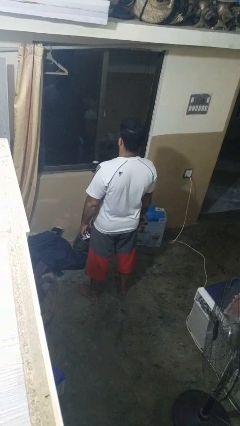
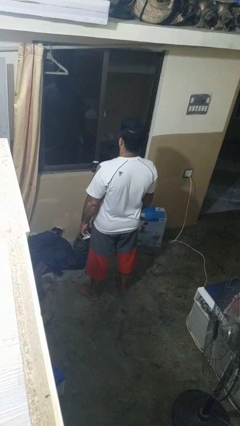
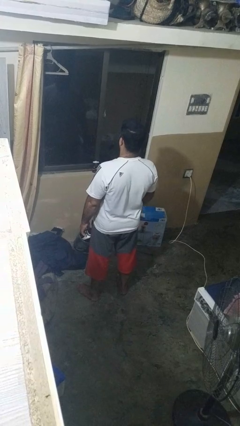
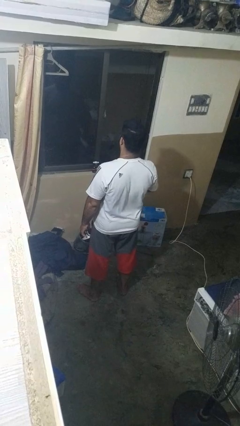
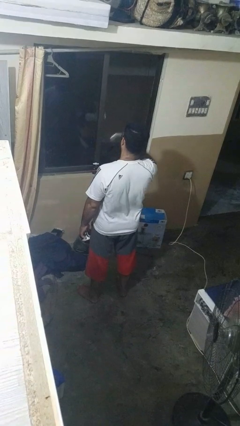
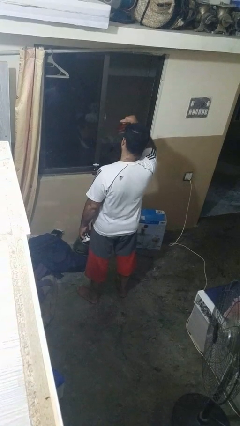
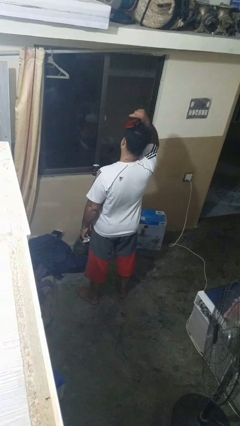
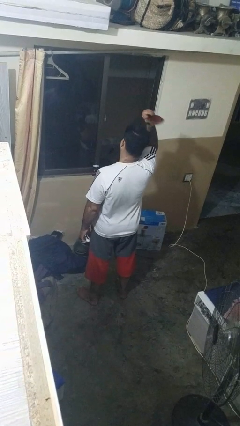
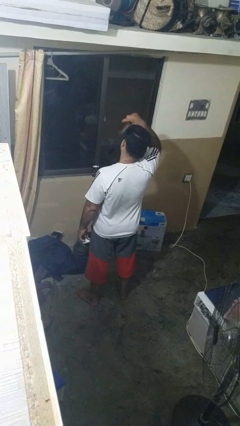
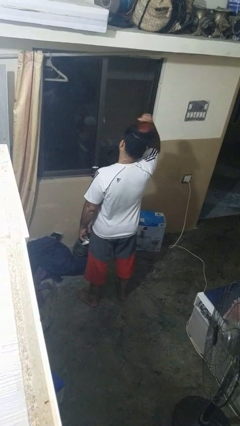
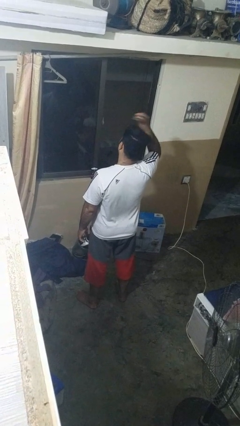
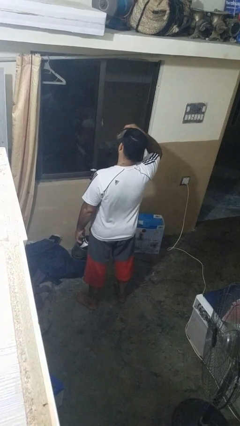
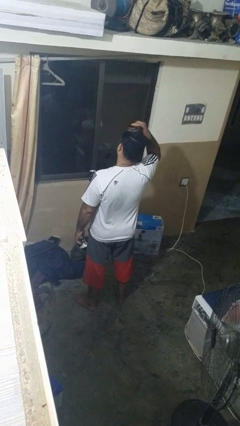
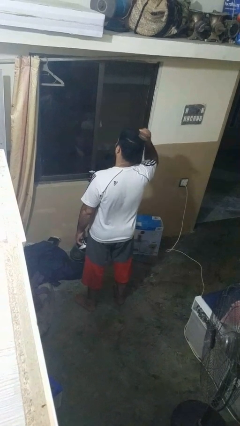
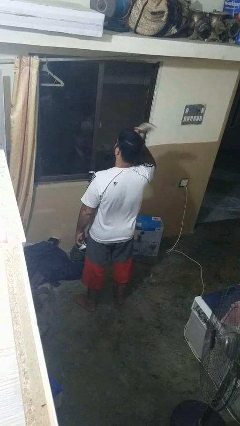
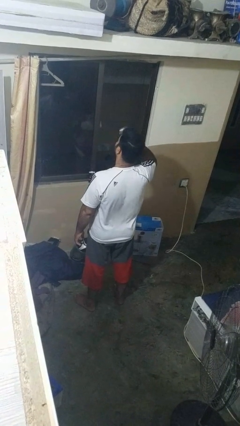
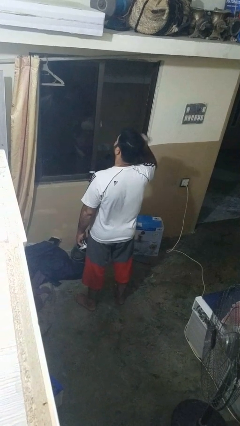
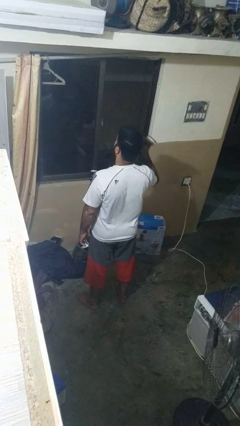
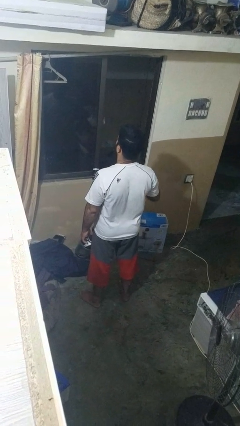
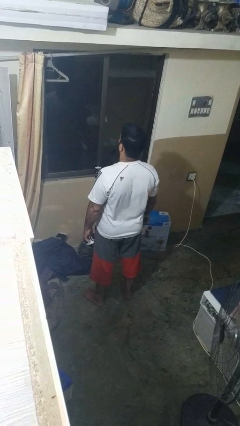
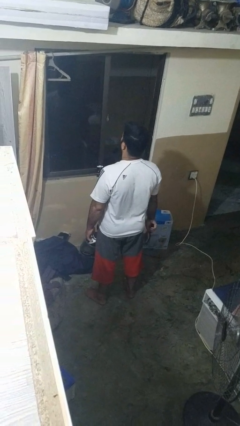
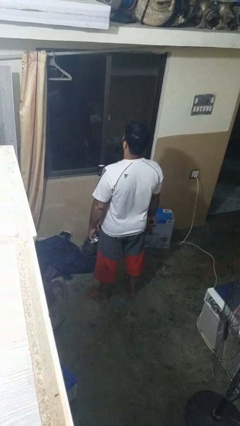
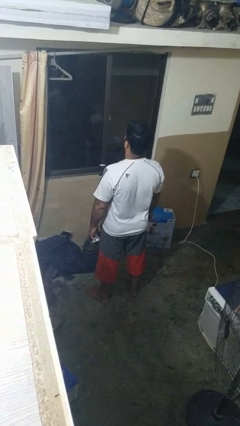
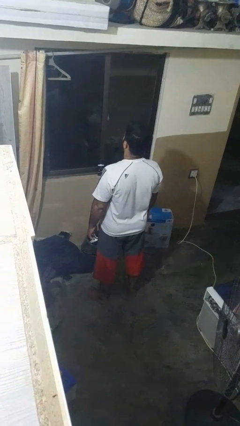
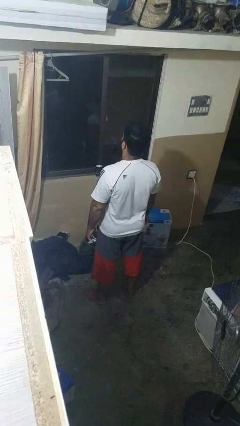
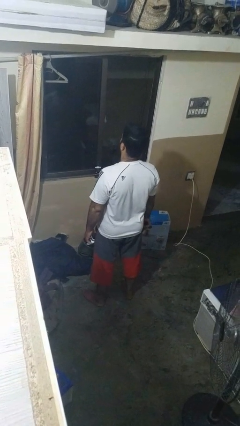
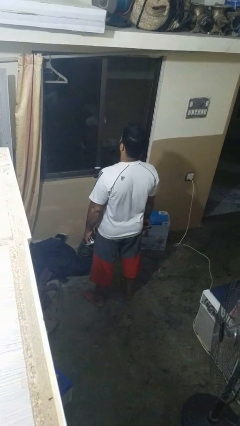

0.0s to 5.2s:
person brushes hair

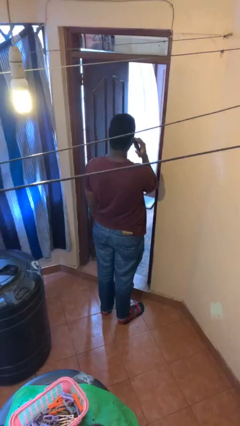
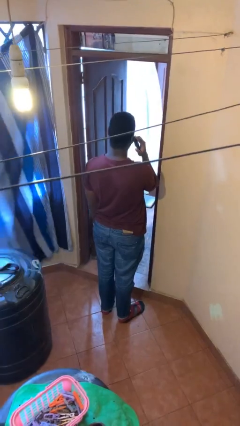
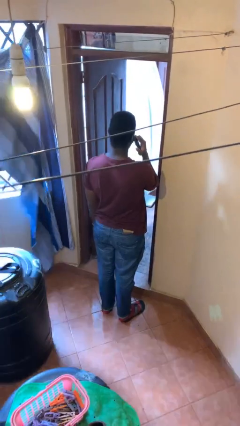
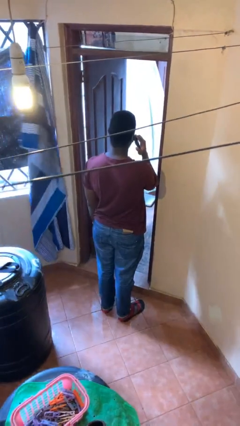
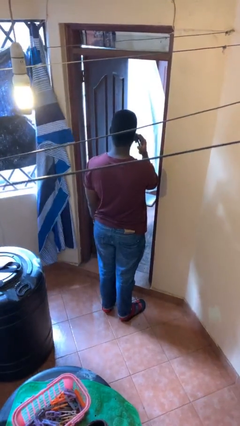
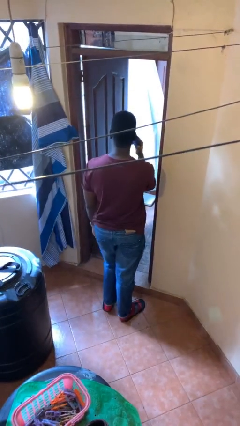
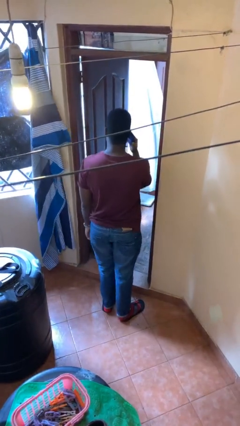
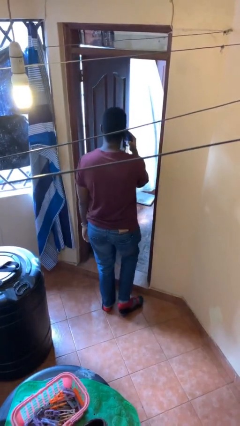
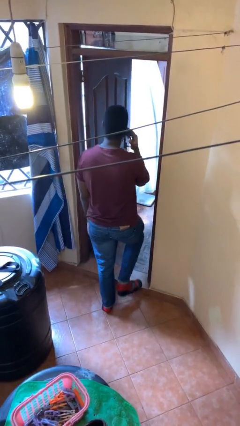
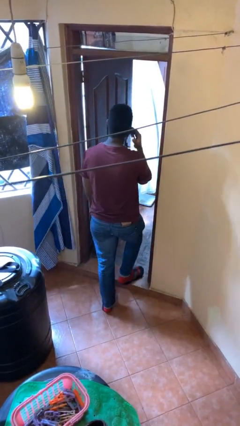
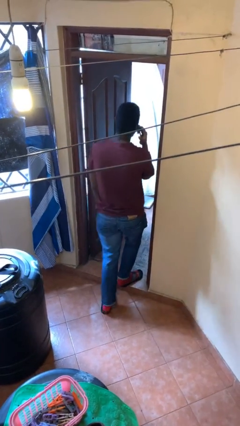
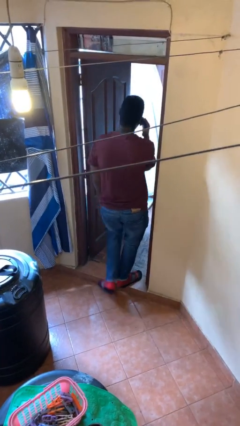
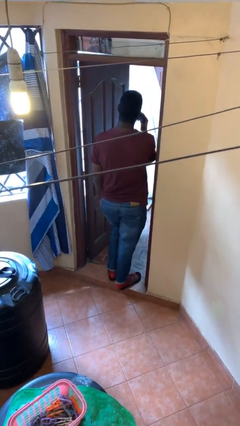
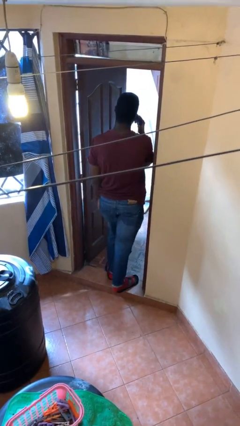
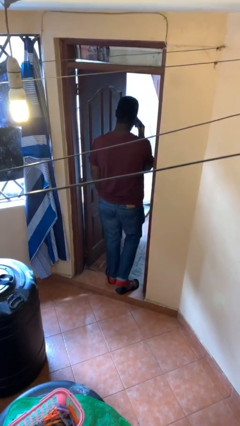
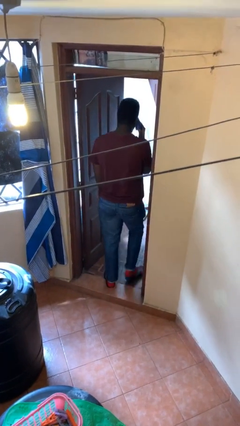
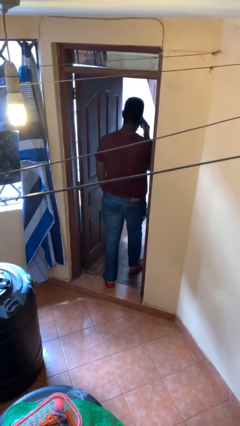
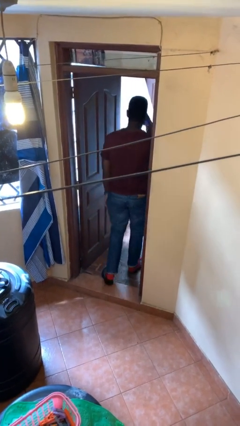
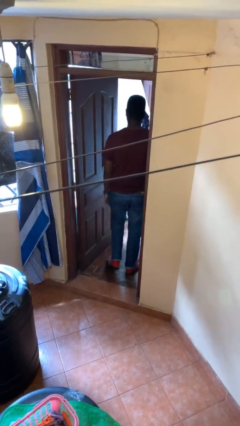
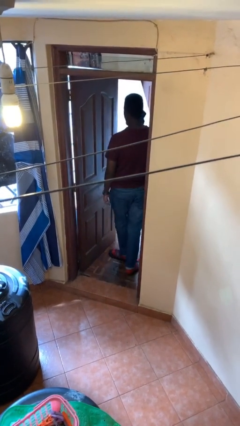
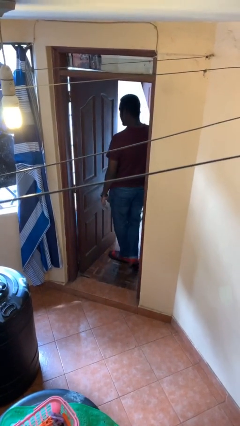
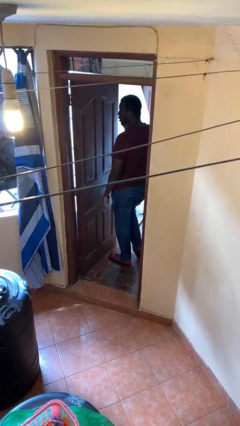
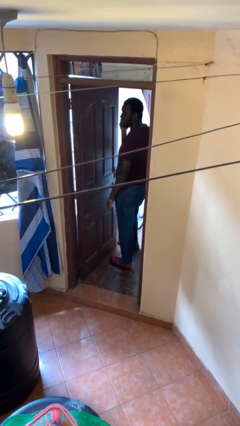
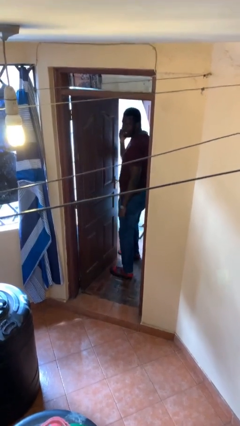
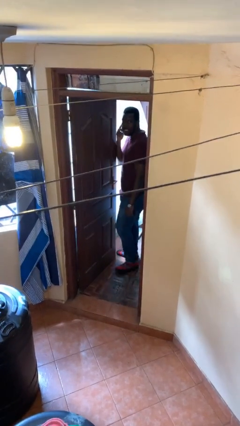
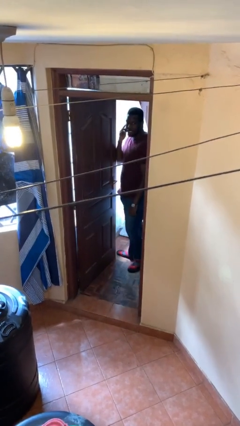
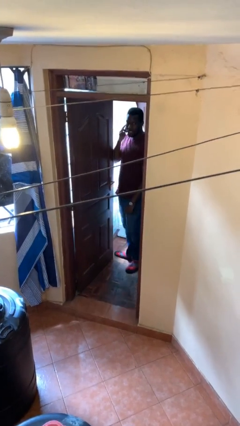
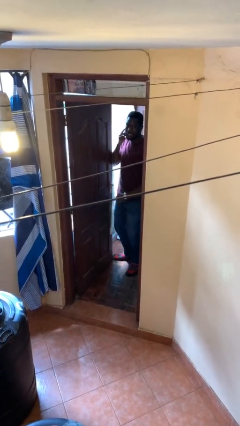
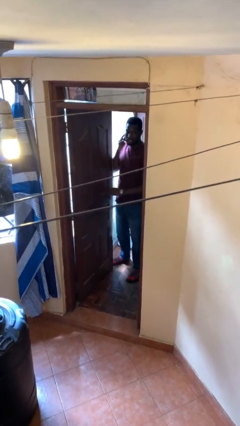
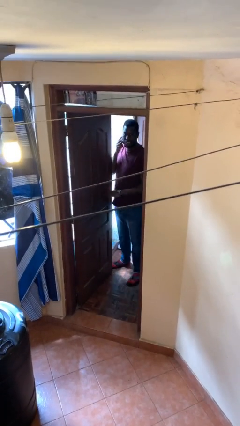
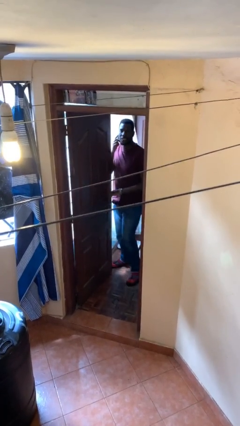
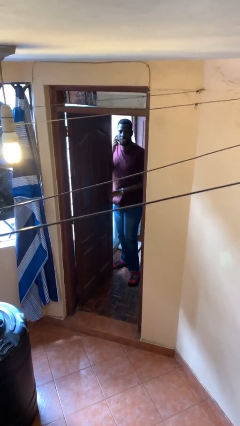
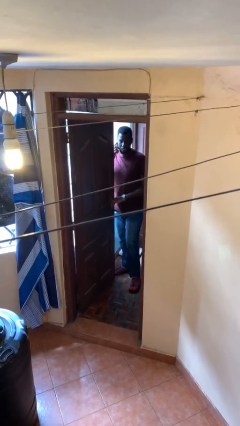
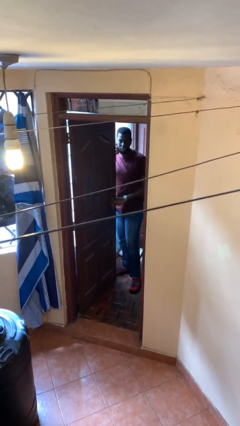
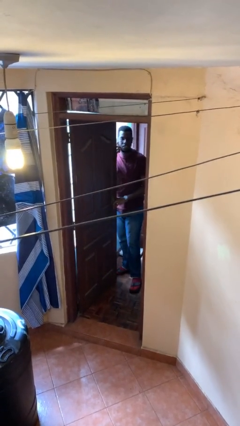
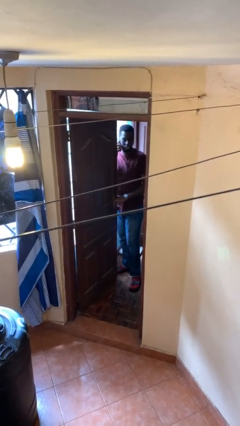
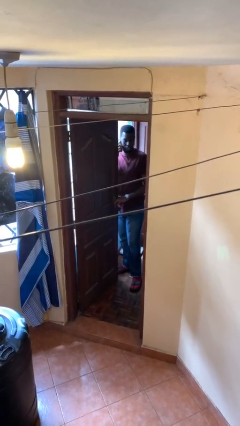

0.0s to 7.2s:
person exits scene through structure

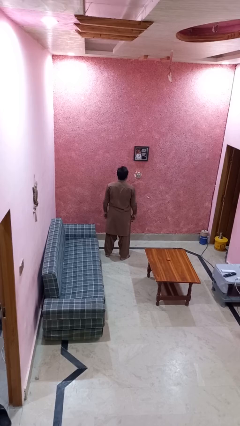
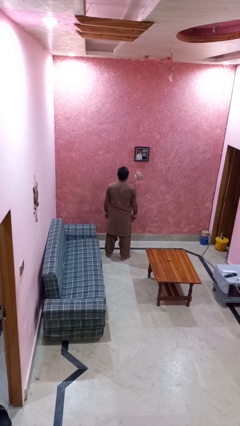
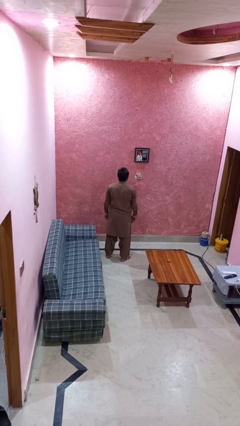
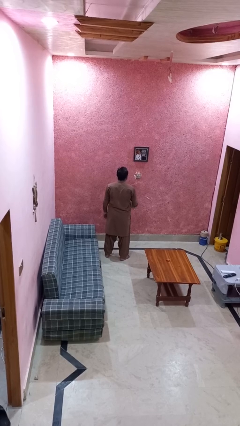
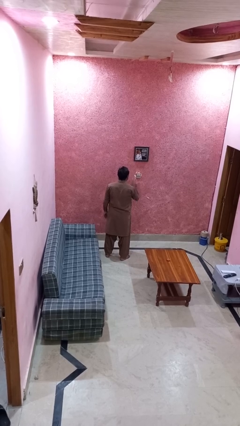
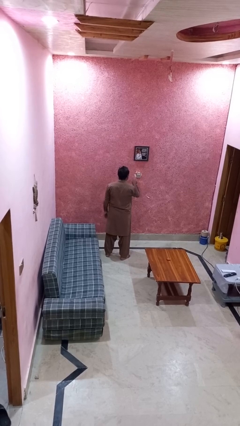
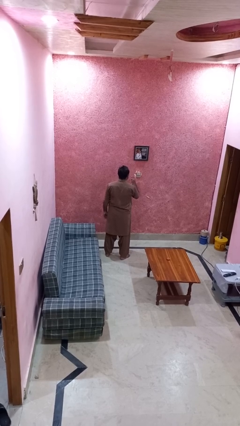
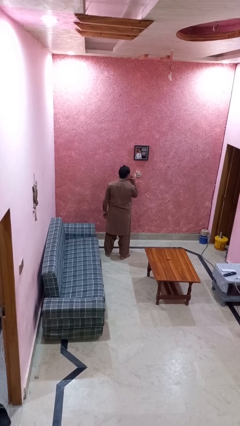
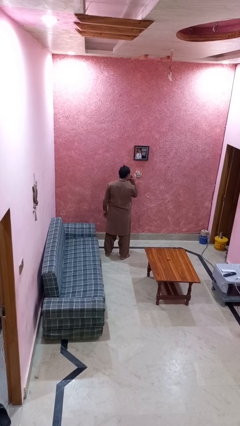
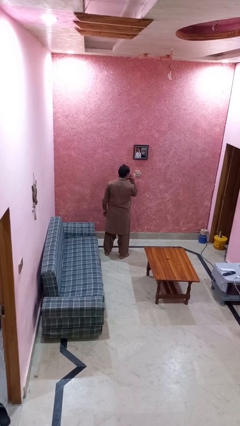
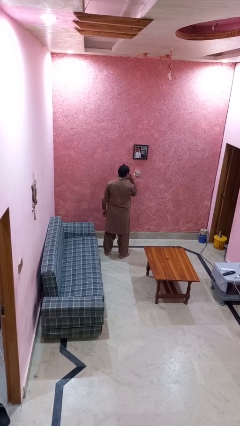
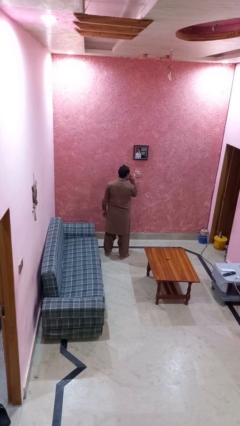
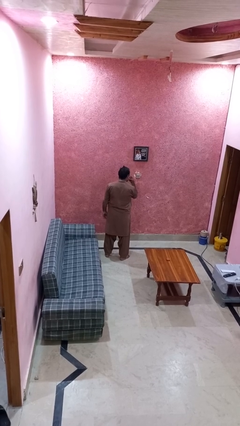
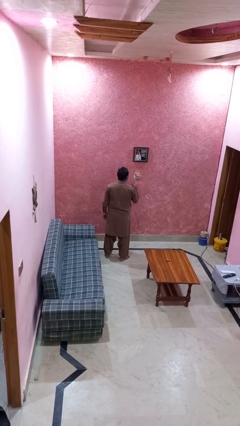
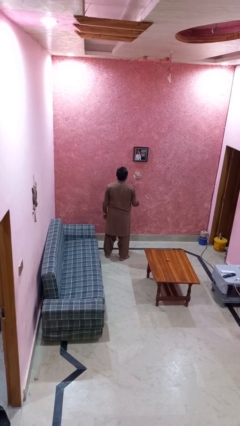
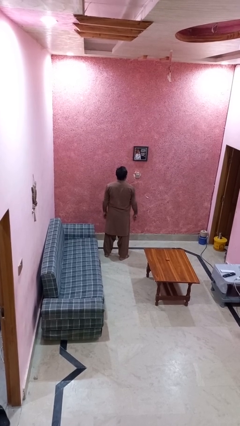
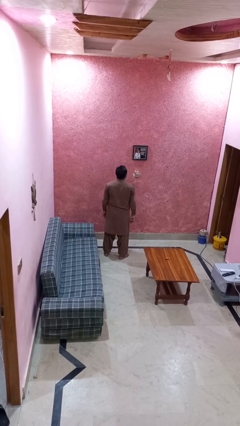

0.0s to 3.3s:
person gestures watch closely

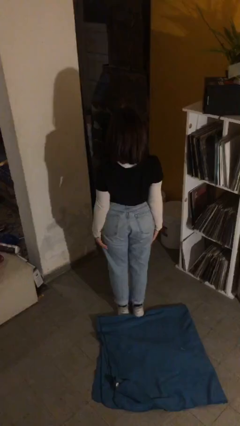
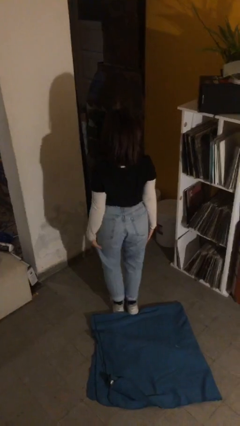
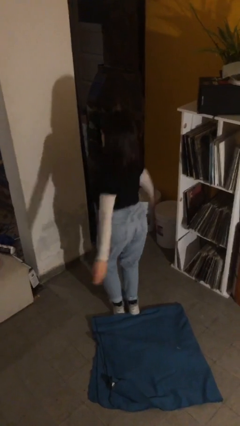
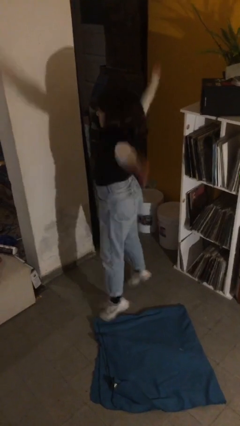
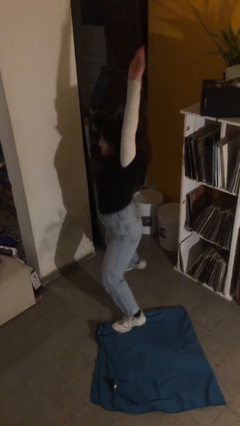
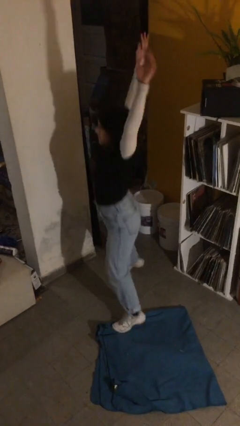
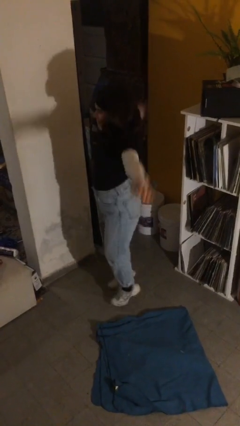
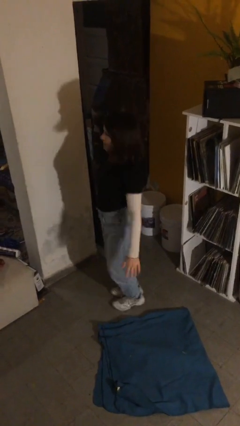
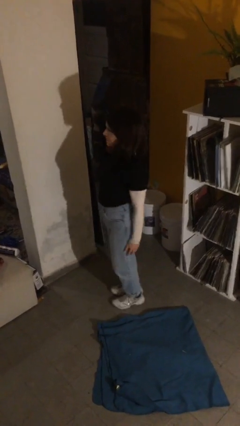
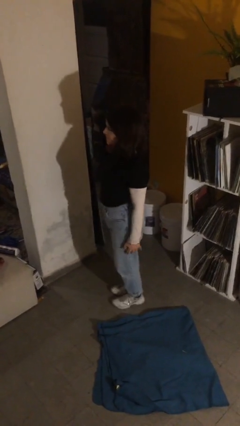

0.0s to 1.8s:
person exercises with jumping jacks

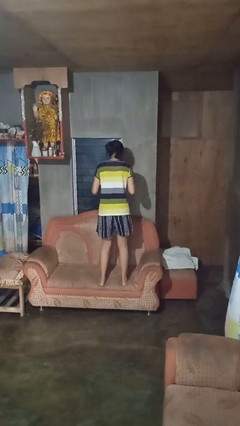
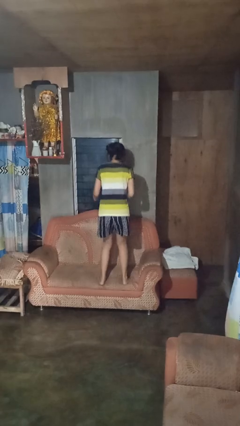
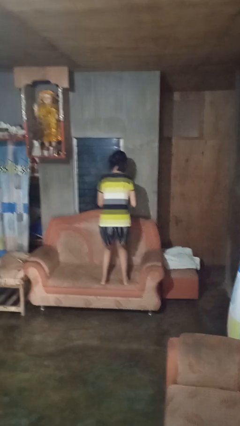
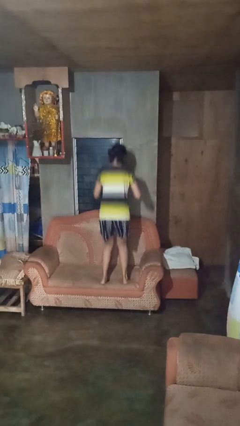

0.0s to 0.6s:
person jumps on couch
